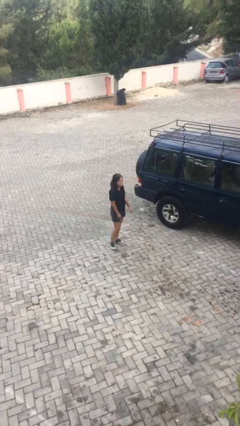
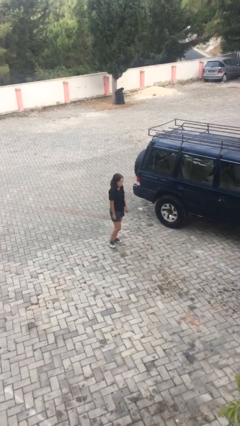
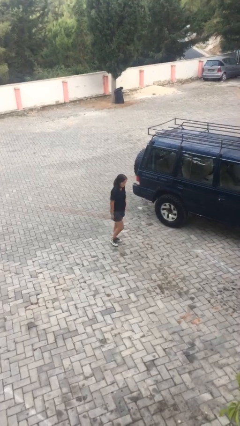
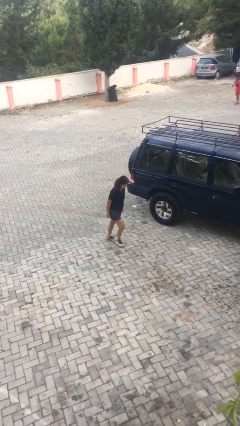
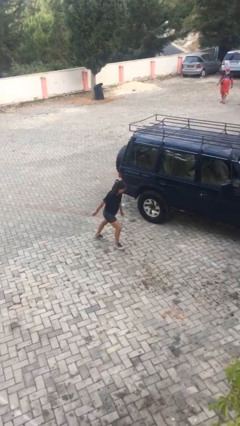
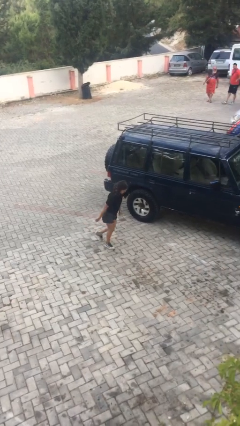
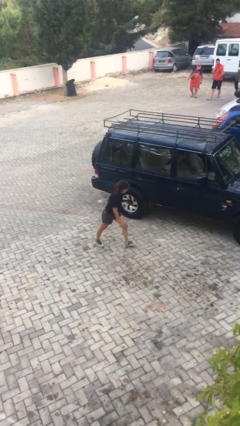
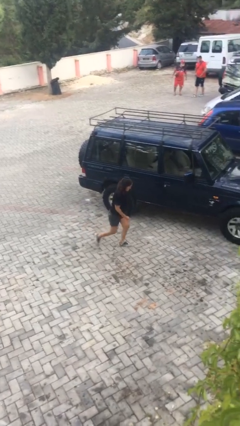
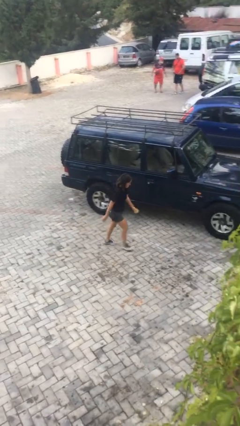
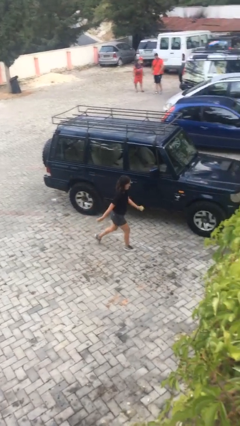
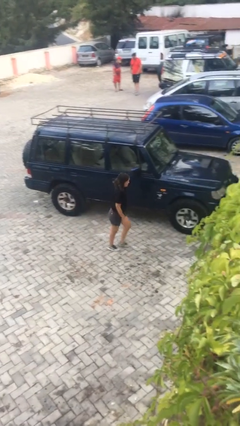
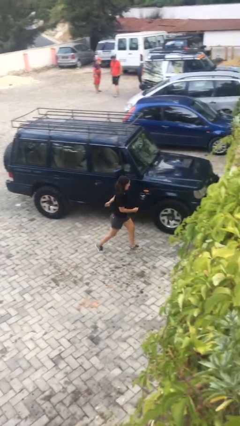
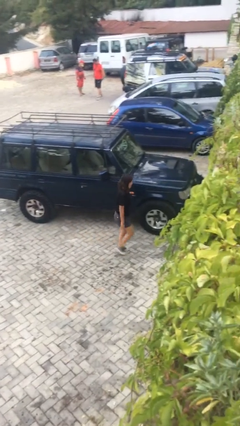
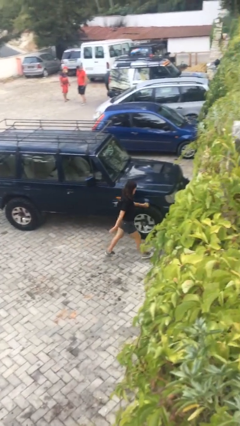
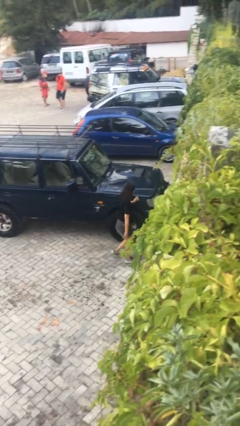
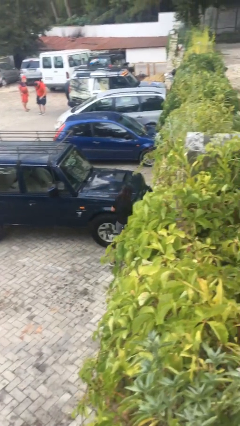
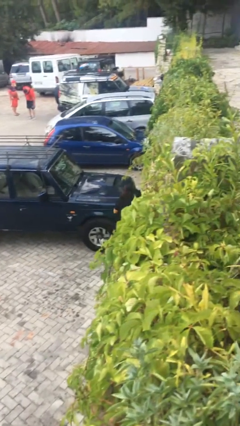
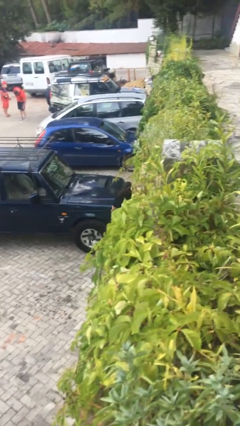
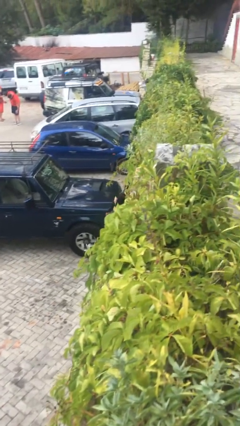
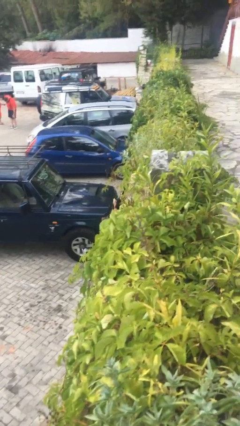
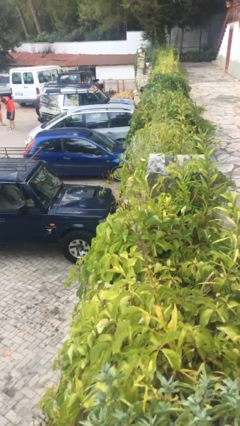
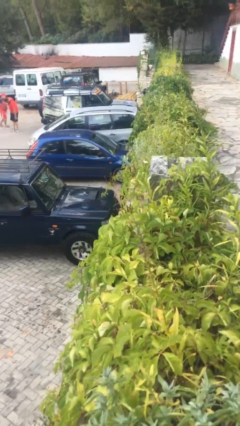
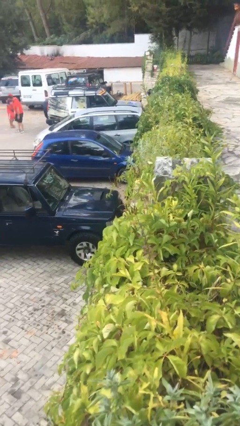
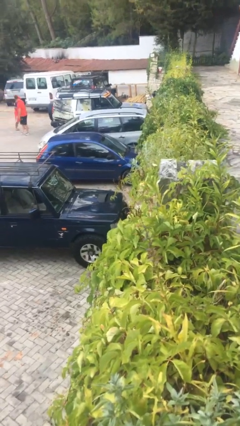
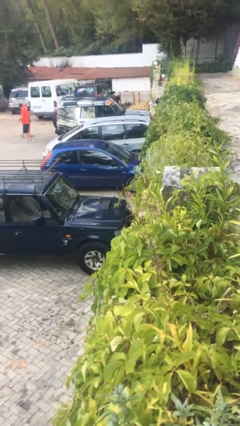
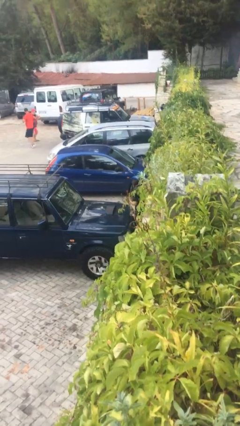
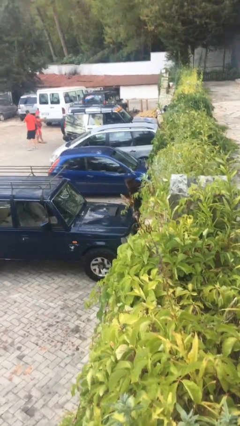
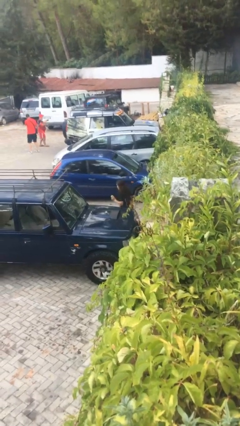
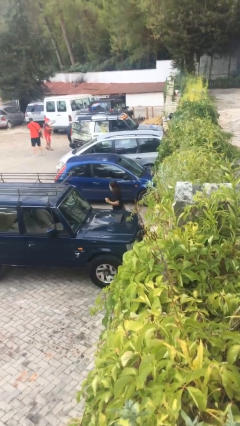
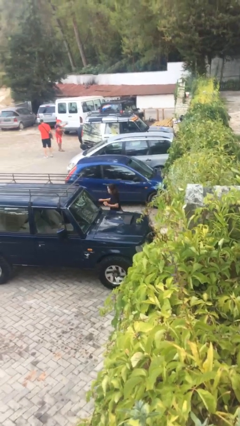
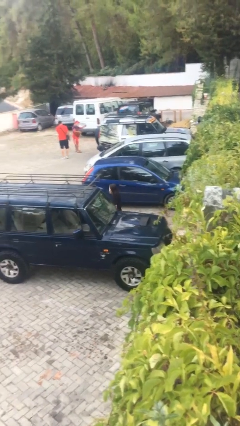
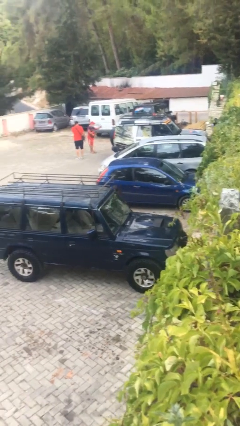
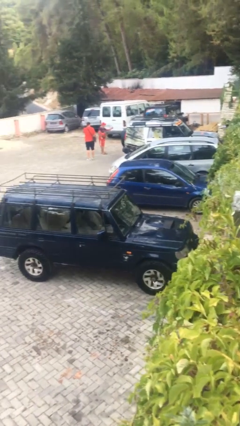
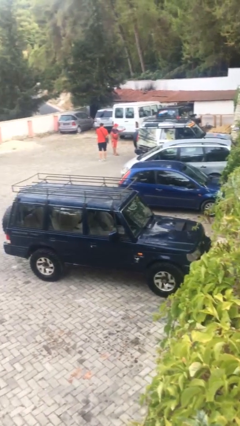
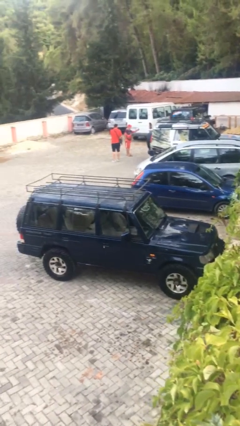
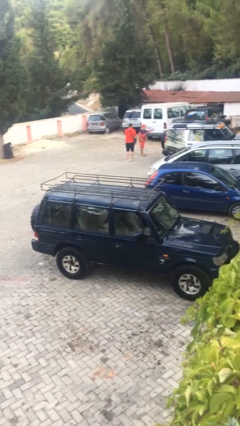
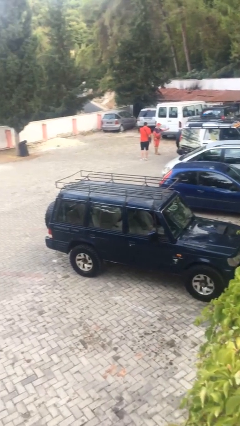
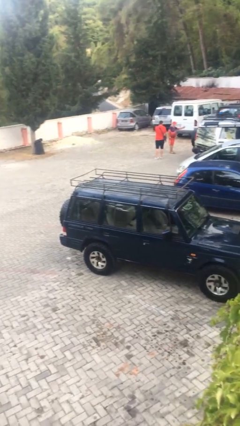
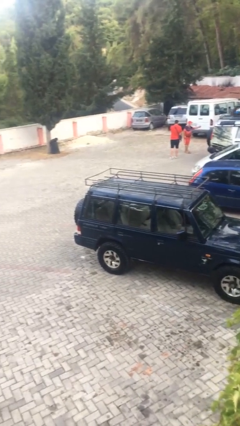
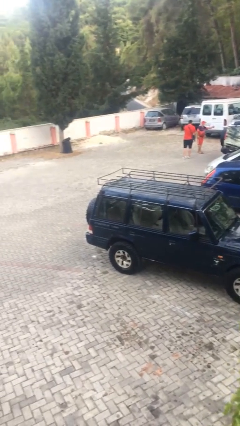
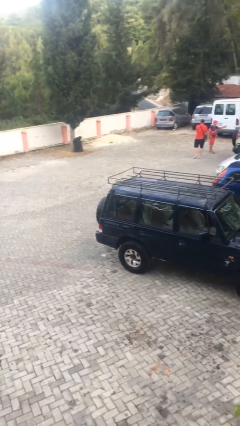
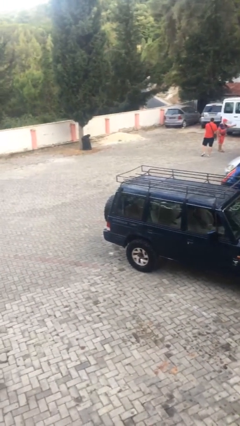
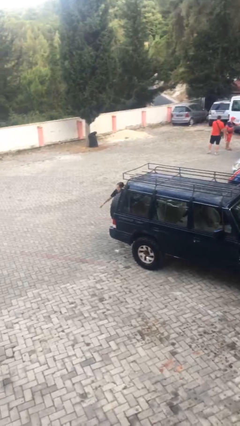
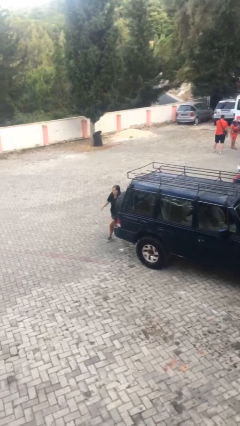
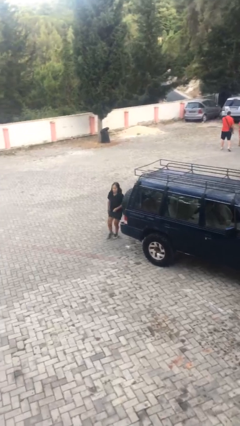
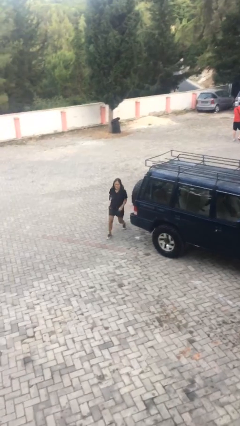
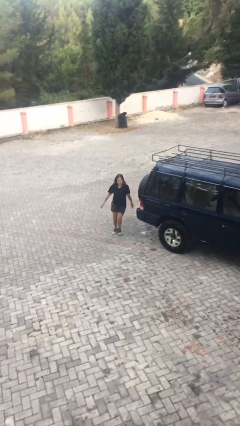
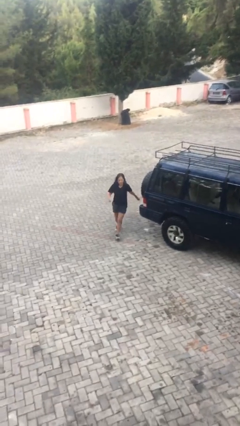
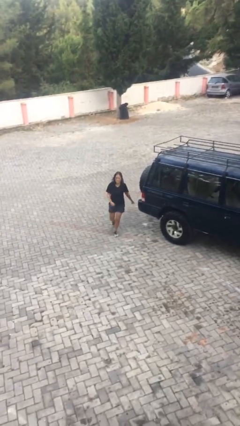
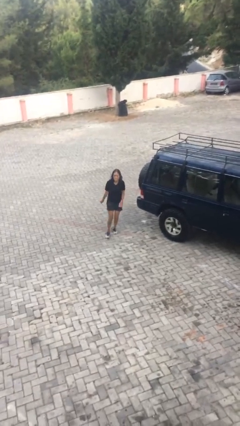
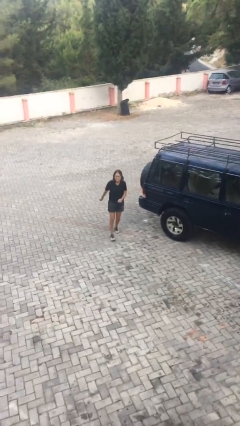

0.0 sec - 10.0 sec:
person walks around car

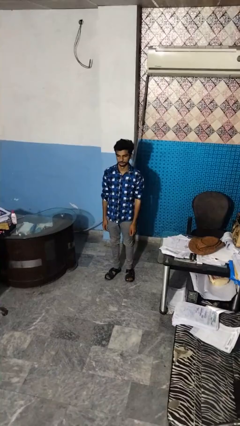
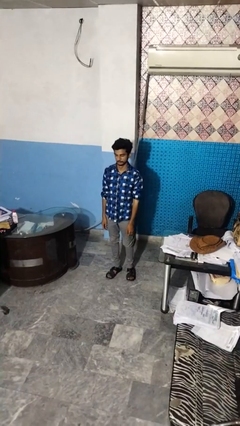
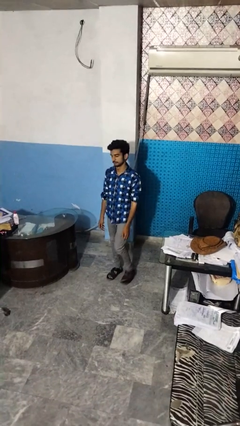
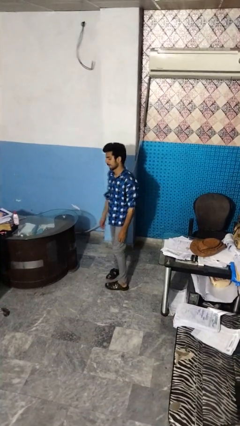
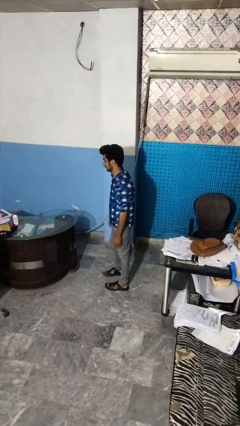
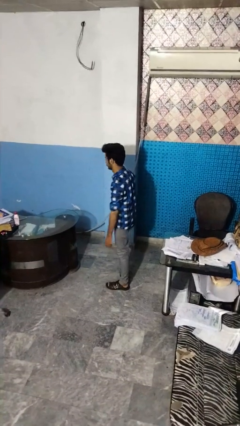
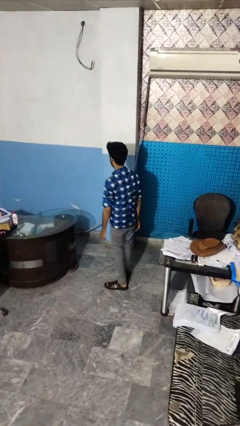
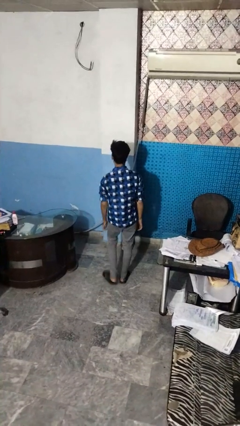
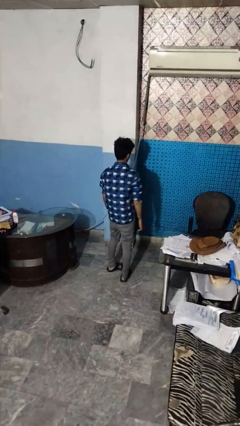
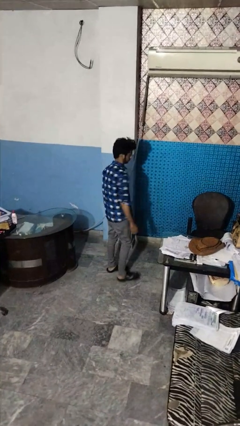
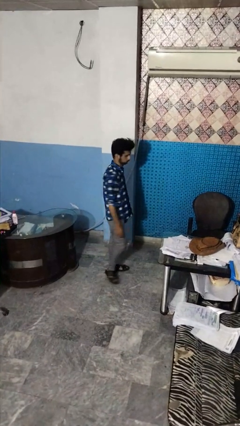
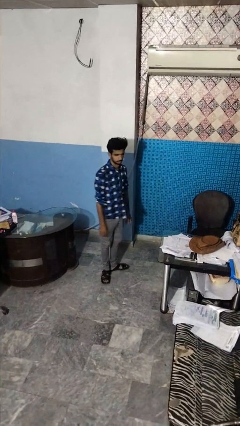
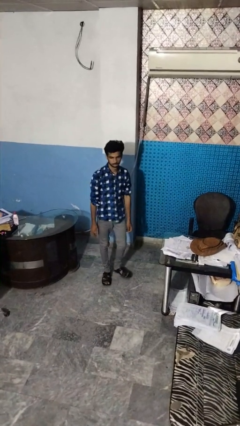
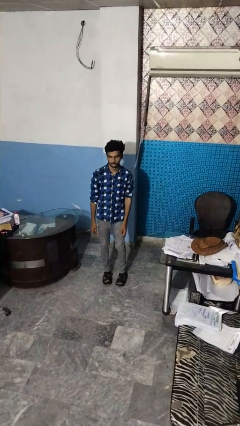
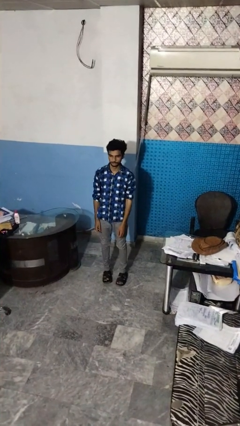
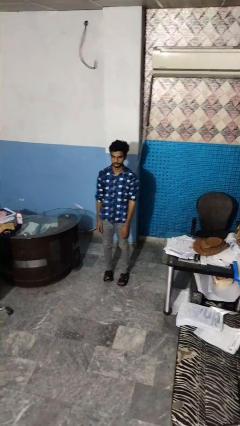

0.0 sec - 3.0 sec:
person twirls

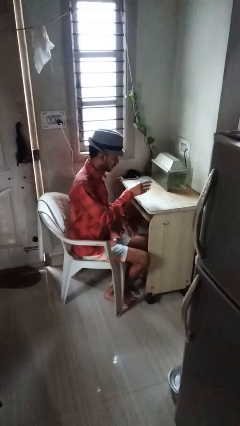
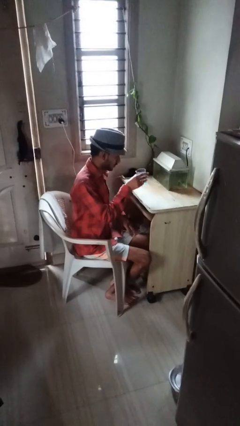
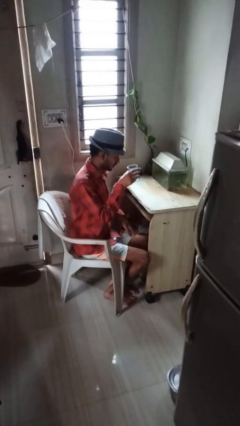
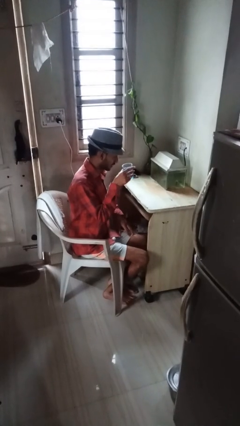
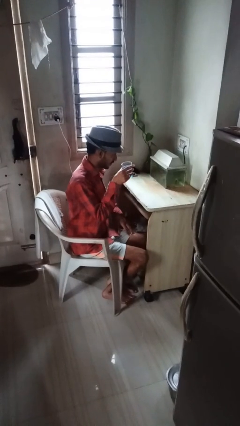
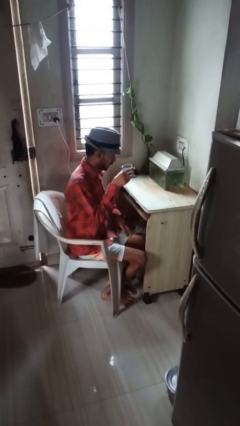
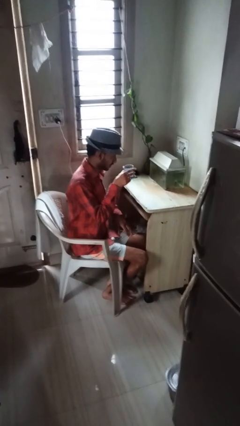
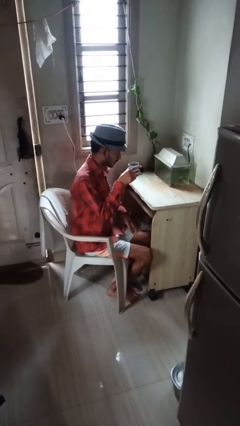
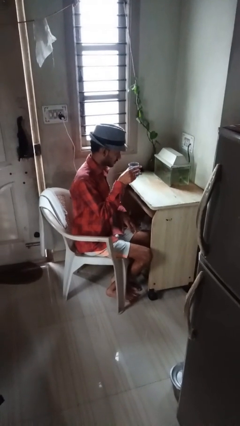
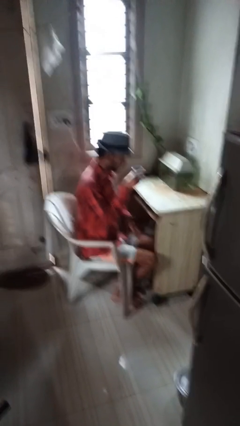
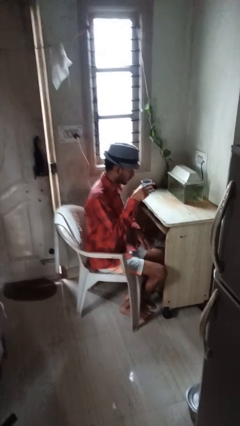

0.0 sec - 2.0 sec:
person picks up object from table

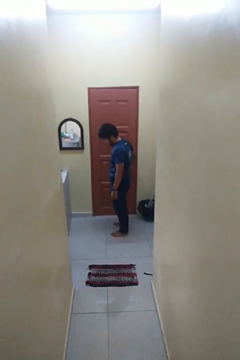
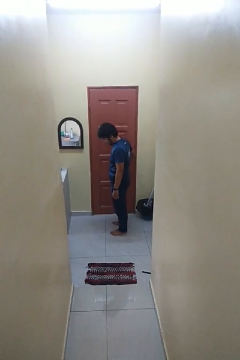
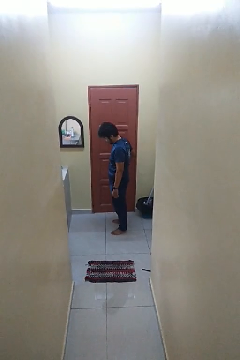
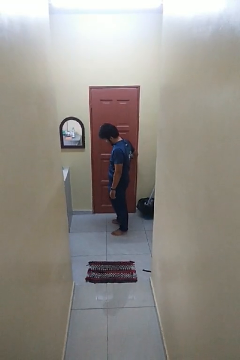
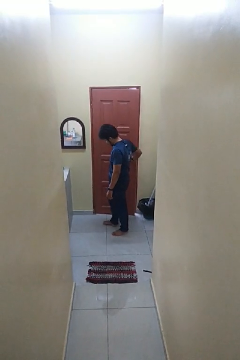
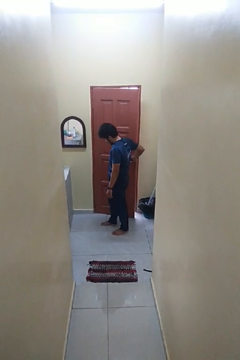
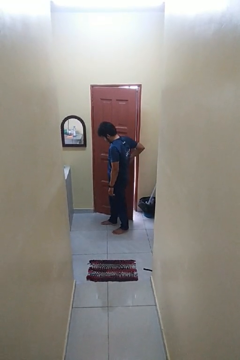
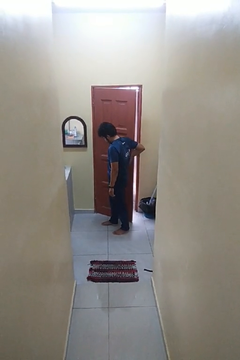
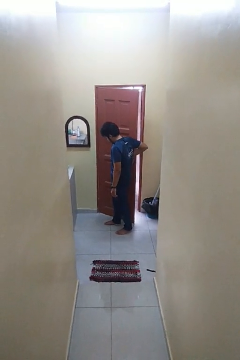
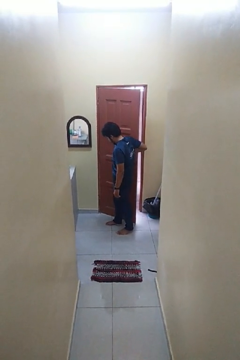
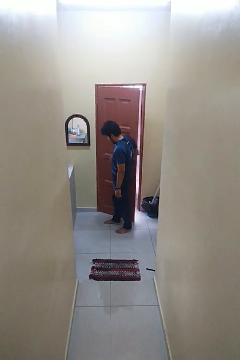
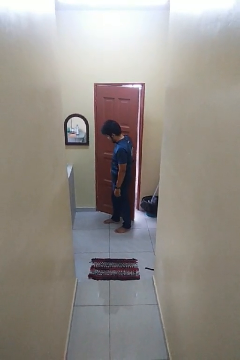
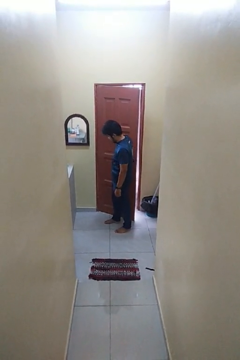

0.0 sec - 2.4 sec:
person opens facility door

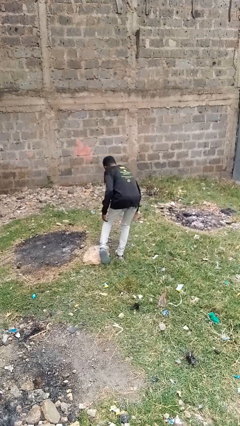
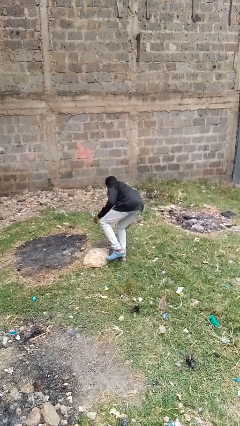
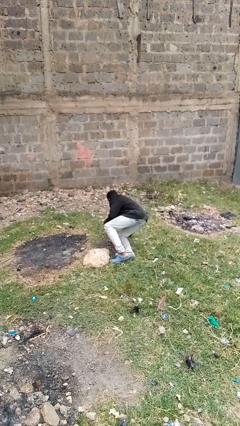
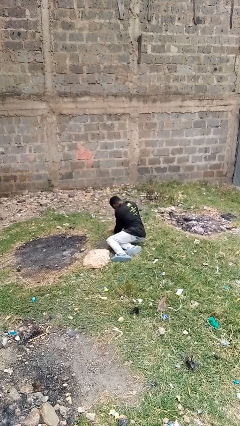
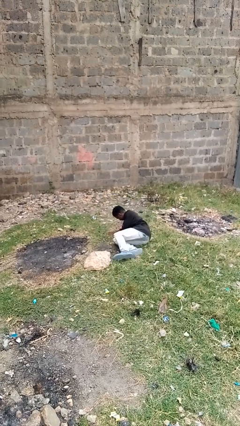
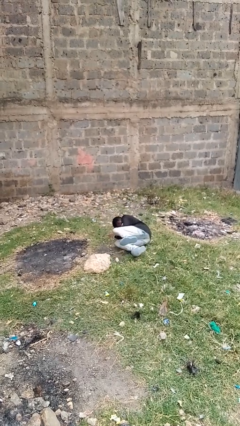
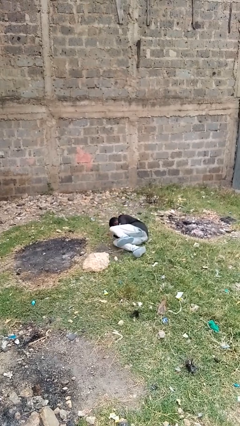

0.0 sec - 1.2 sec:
person trips on object on floor
